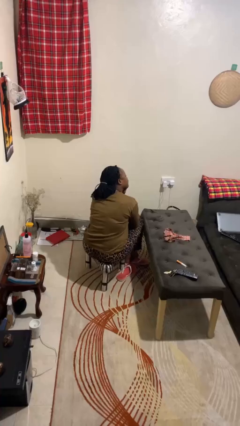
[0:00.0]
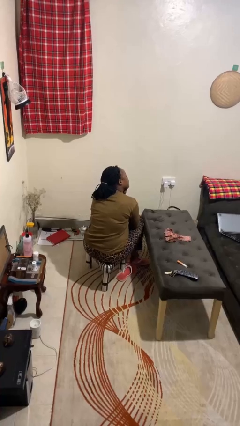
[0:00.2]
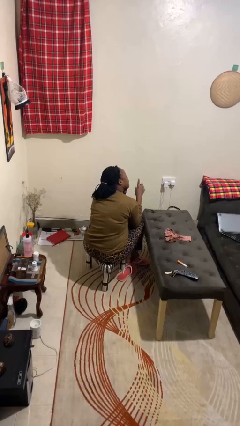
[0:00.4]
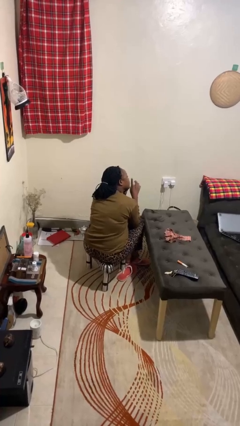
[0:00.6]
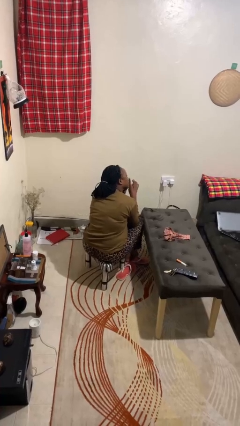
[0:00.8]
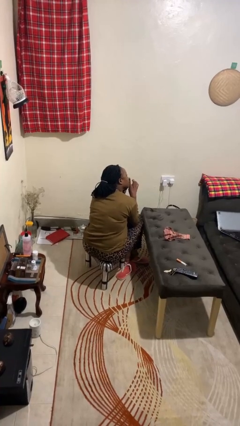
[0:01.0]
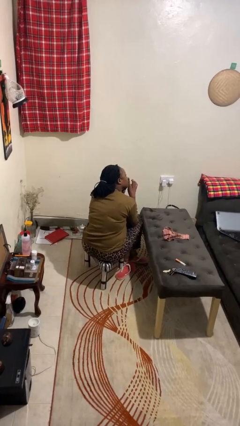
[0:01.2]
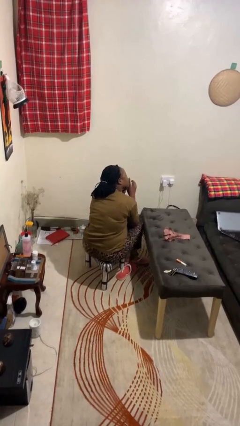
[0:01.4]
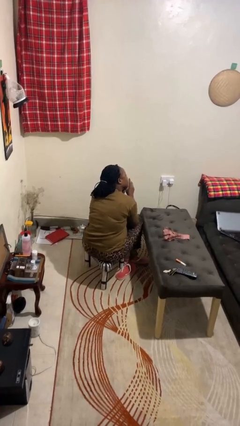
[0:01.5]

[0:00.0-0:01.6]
person gestures be quiet

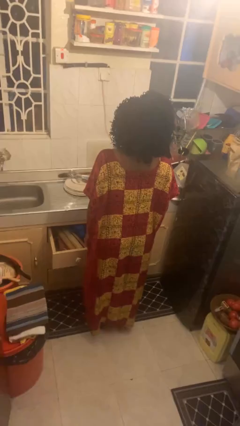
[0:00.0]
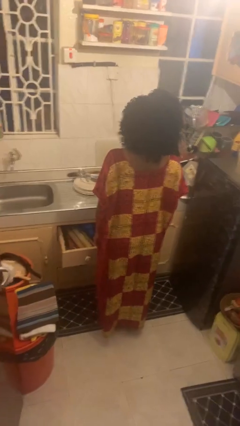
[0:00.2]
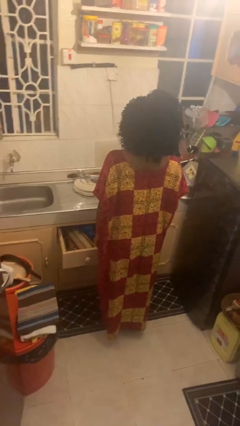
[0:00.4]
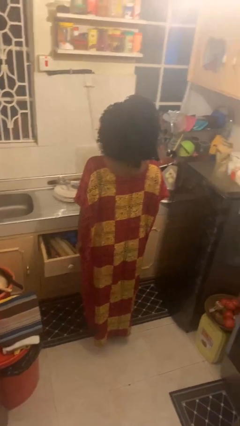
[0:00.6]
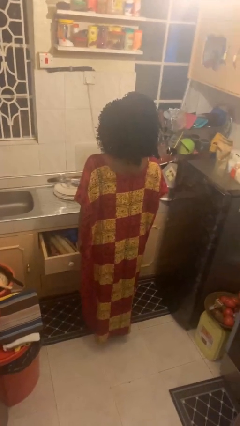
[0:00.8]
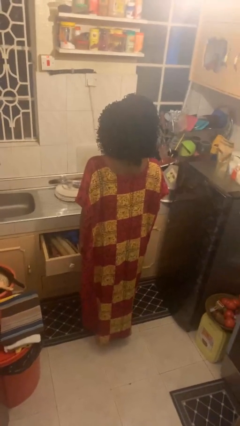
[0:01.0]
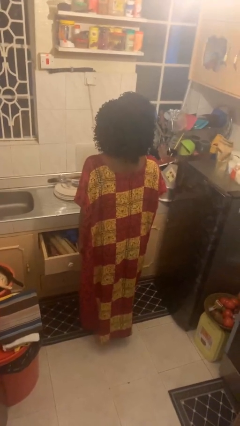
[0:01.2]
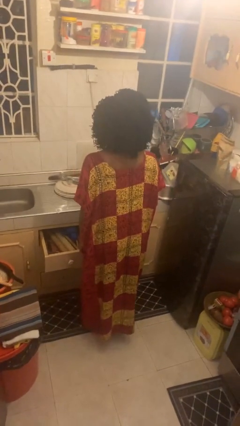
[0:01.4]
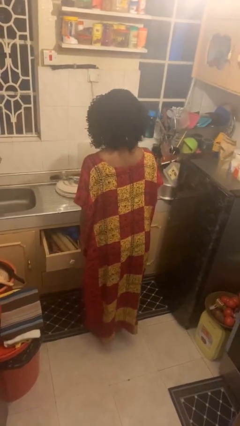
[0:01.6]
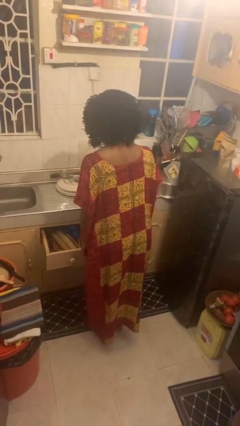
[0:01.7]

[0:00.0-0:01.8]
person searches in kitchen drawer

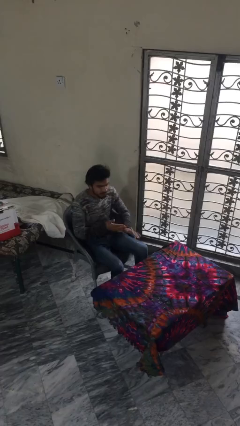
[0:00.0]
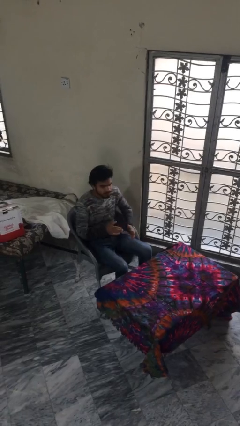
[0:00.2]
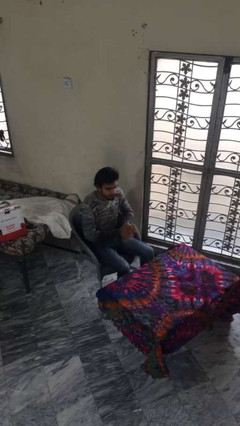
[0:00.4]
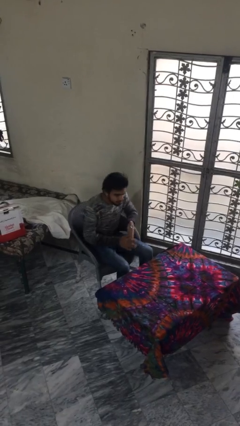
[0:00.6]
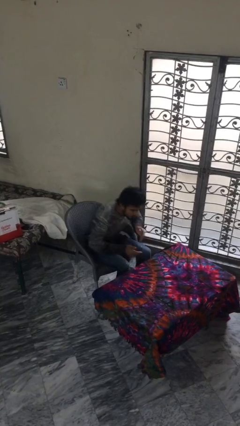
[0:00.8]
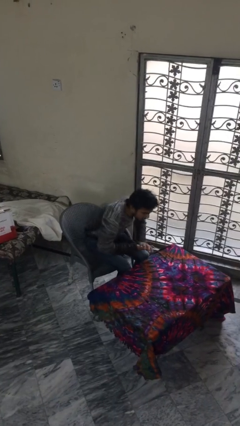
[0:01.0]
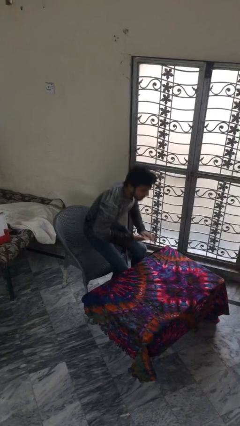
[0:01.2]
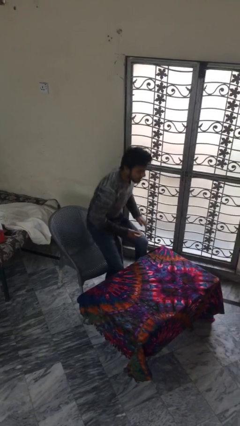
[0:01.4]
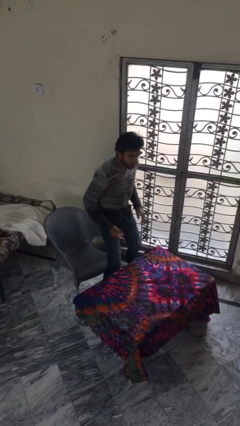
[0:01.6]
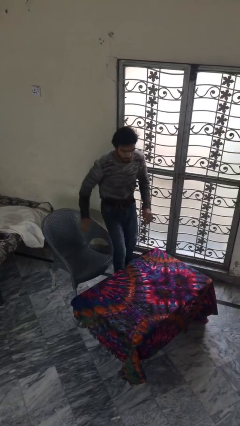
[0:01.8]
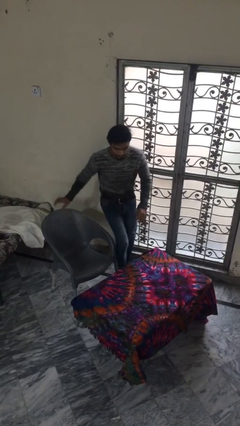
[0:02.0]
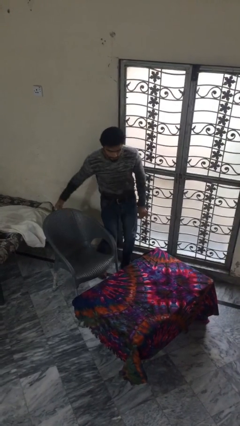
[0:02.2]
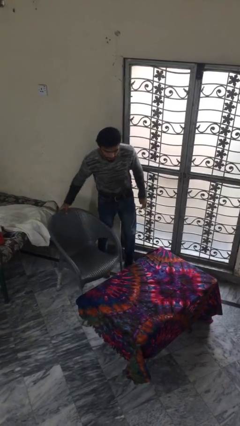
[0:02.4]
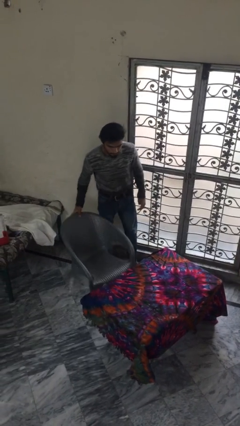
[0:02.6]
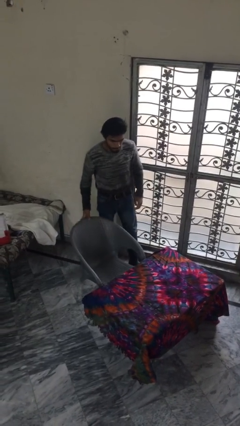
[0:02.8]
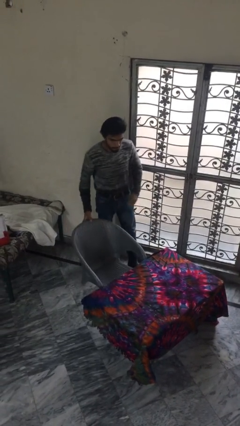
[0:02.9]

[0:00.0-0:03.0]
person stands up

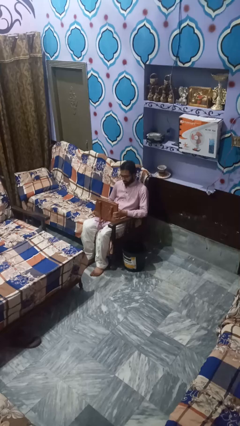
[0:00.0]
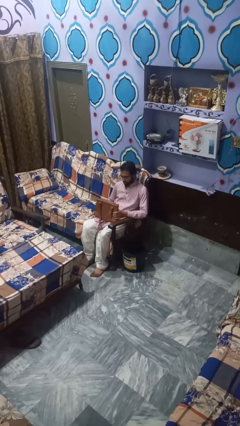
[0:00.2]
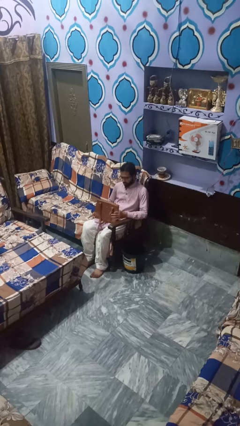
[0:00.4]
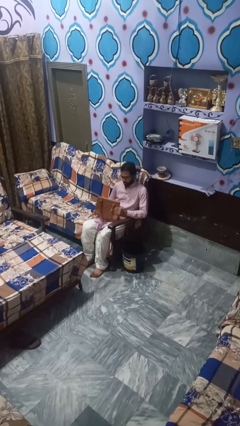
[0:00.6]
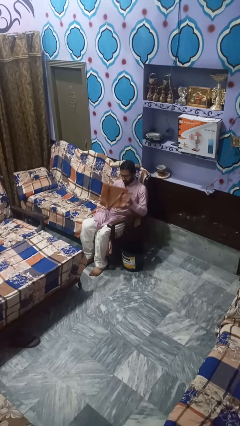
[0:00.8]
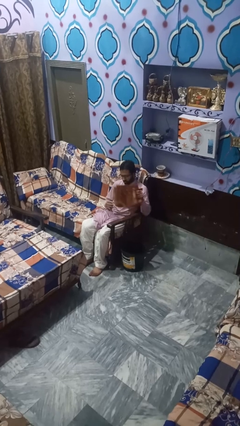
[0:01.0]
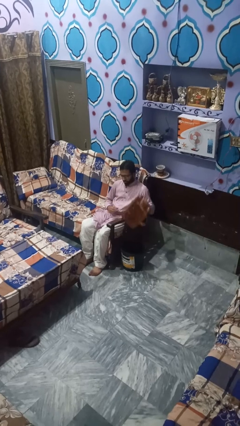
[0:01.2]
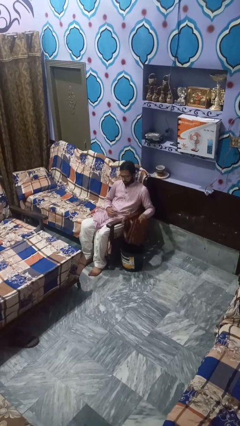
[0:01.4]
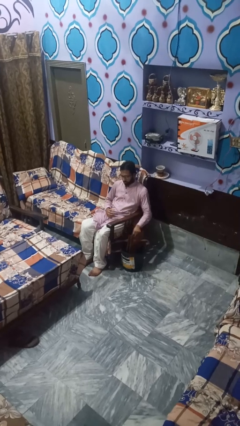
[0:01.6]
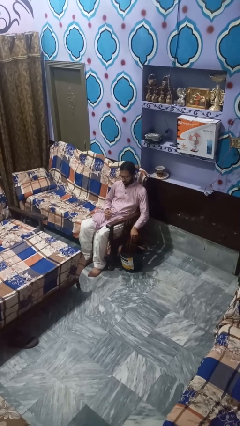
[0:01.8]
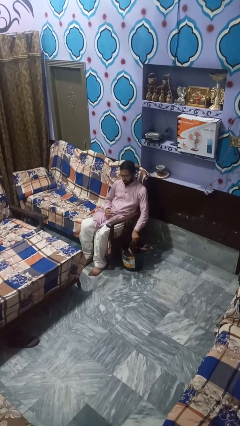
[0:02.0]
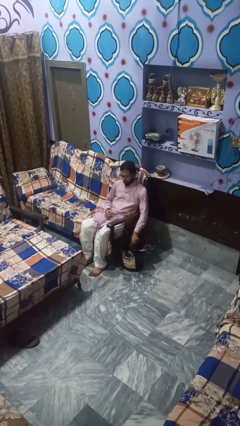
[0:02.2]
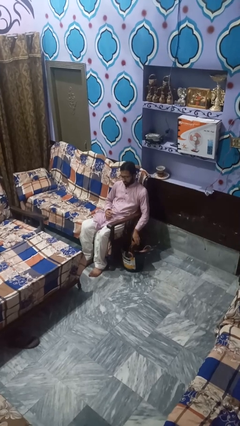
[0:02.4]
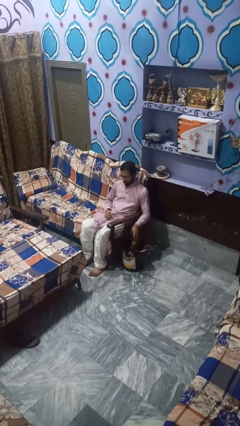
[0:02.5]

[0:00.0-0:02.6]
person puts object into basket

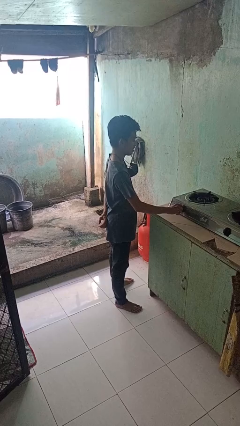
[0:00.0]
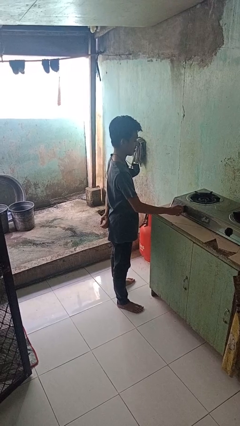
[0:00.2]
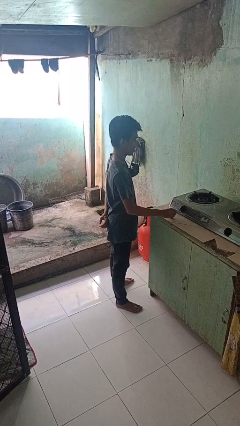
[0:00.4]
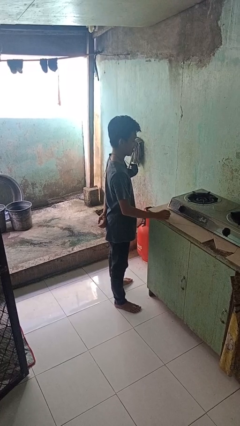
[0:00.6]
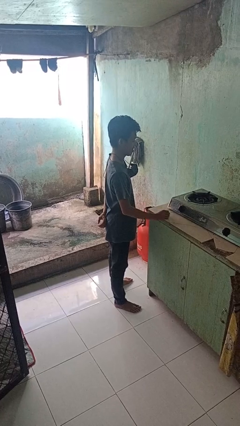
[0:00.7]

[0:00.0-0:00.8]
person turns off stovetop

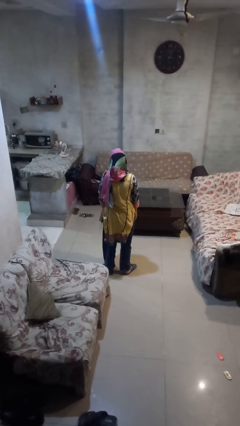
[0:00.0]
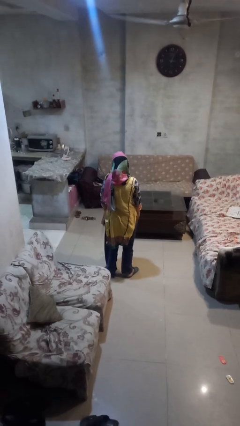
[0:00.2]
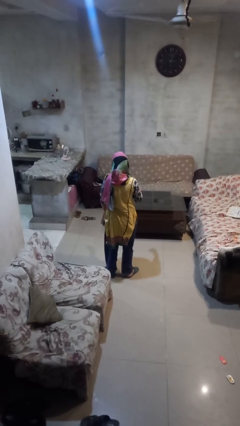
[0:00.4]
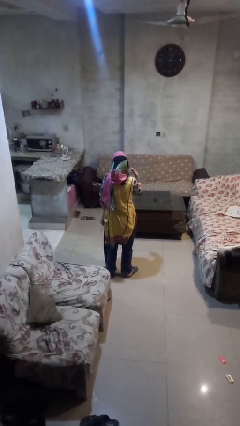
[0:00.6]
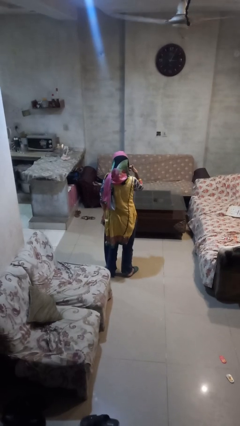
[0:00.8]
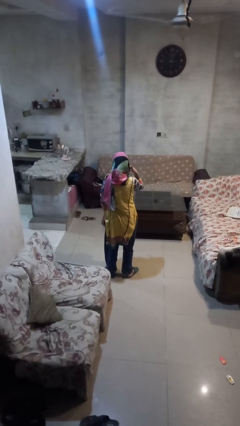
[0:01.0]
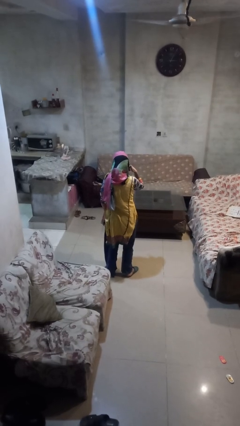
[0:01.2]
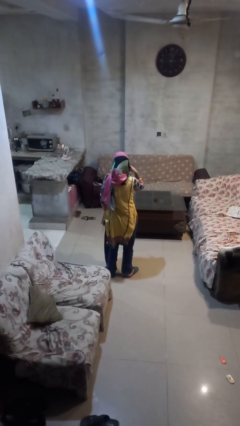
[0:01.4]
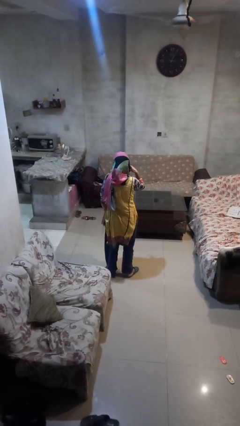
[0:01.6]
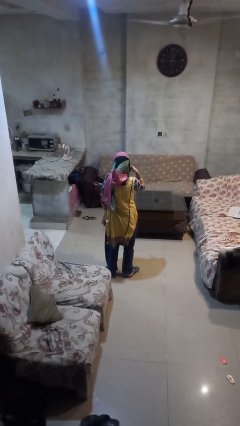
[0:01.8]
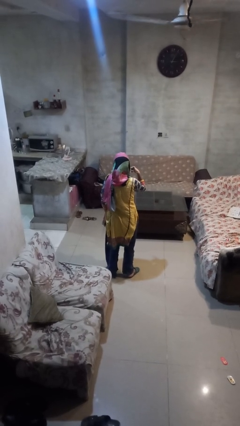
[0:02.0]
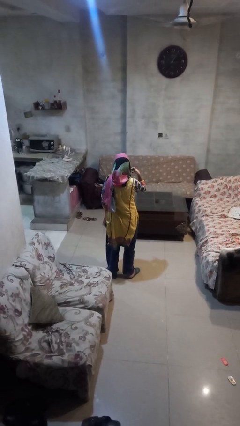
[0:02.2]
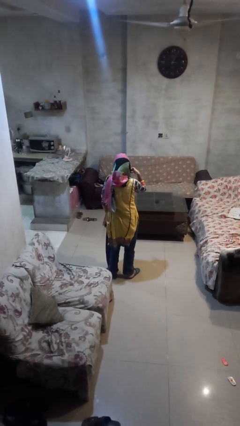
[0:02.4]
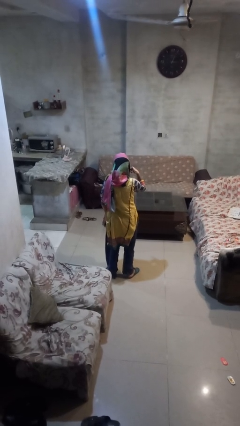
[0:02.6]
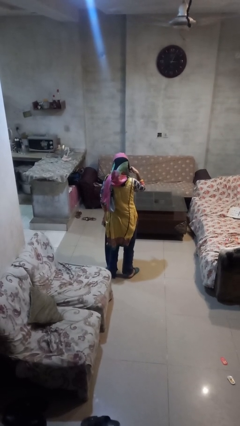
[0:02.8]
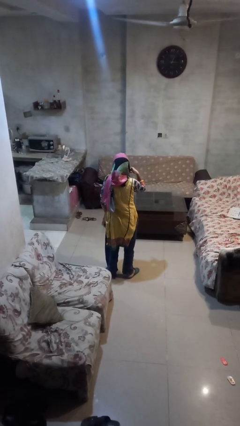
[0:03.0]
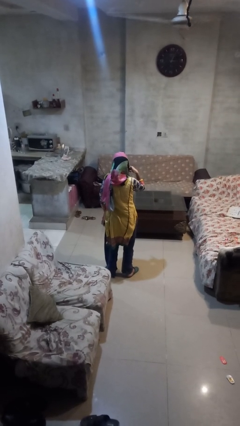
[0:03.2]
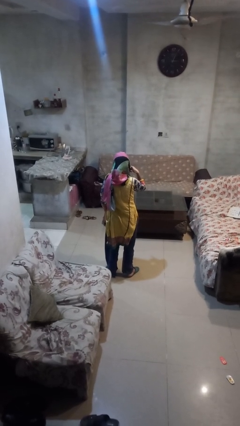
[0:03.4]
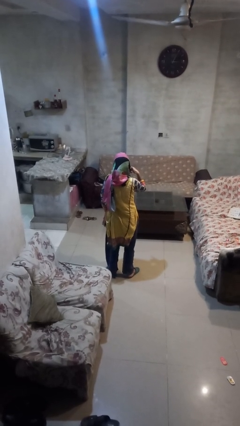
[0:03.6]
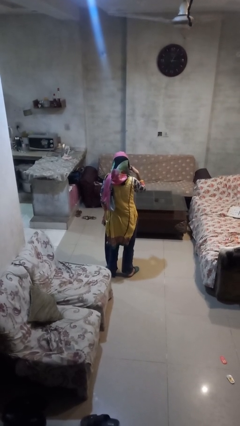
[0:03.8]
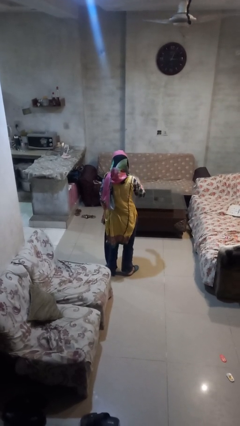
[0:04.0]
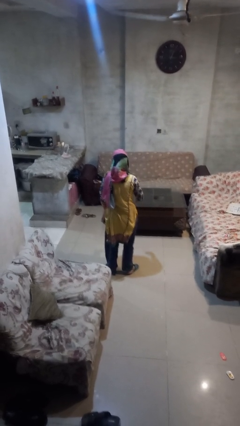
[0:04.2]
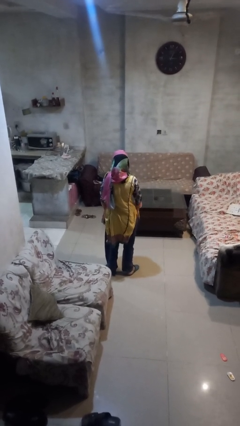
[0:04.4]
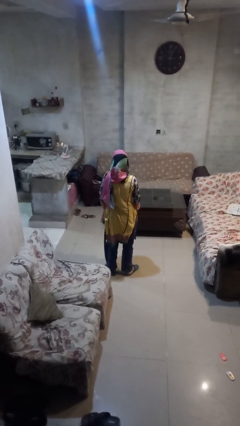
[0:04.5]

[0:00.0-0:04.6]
person gestures call me

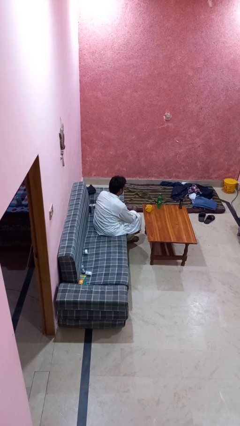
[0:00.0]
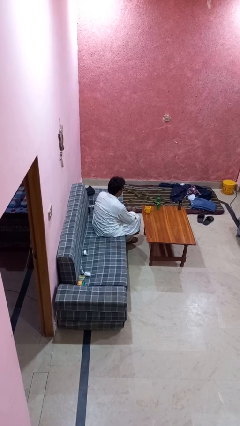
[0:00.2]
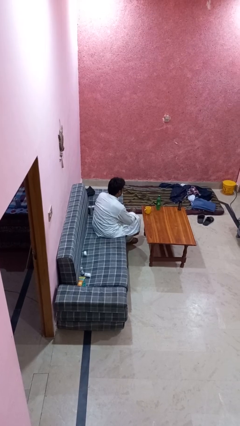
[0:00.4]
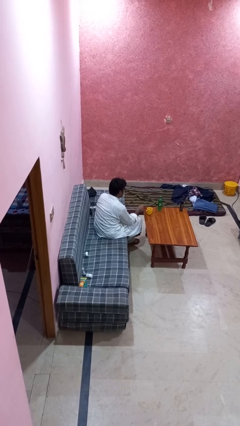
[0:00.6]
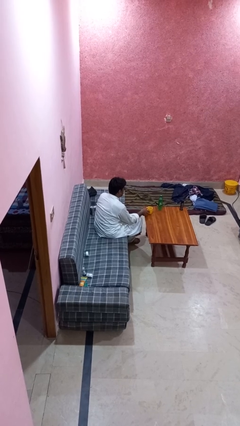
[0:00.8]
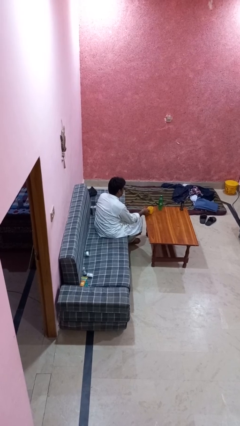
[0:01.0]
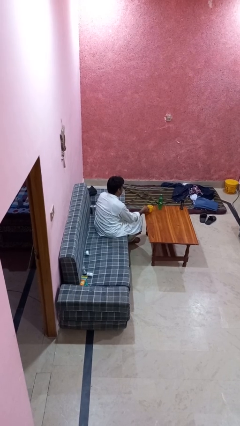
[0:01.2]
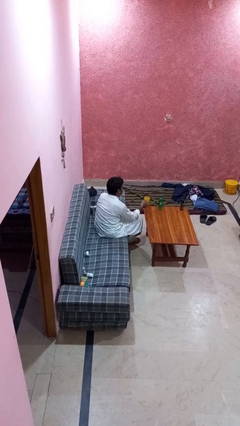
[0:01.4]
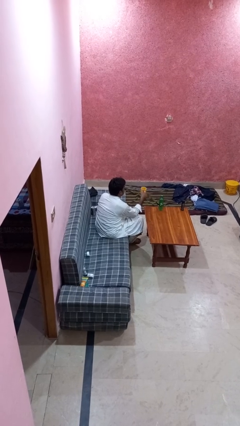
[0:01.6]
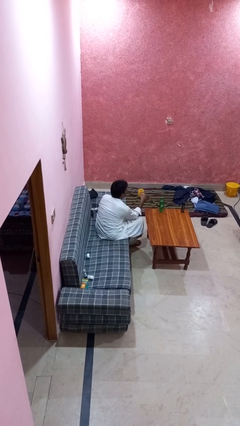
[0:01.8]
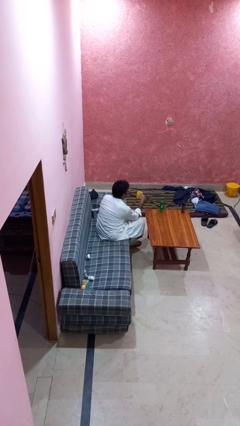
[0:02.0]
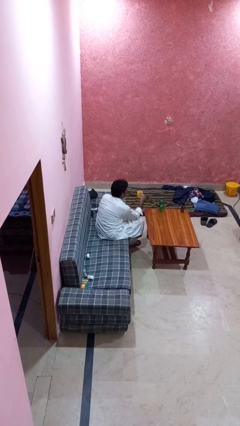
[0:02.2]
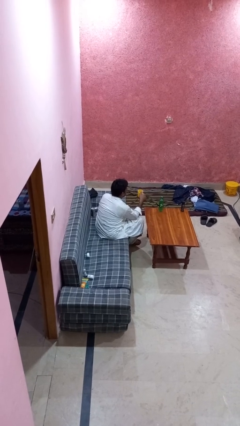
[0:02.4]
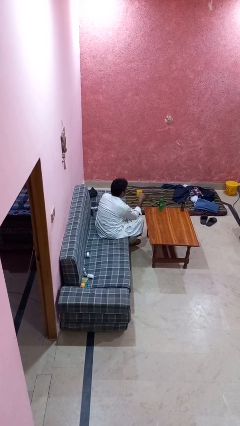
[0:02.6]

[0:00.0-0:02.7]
person picks up object from table

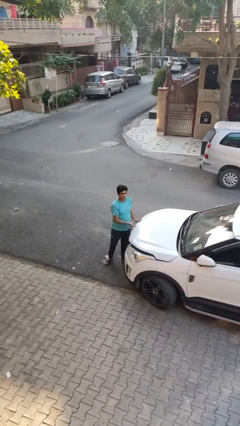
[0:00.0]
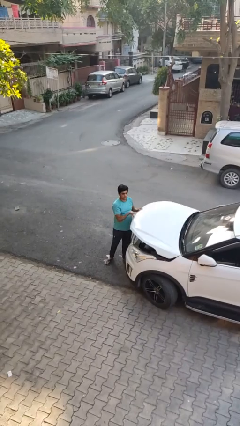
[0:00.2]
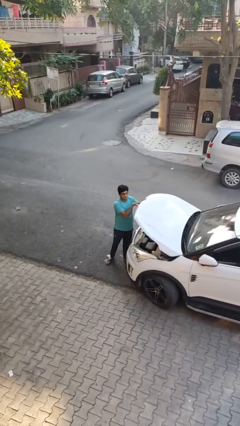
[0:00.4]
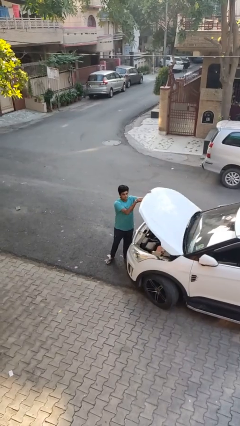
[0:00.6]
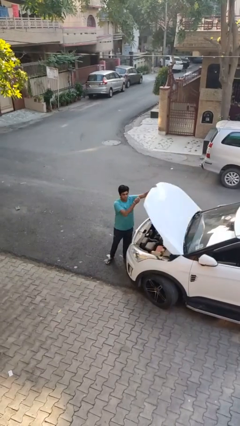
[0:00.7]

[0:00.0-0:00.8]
person opens car hood
